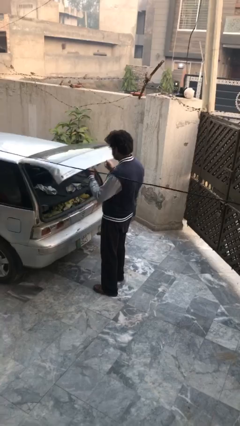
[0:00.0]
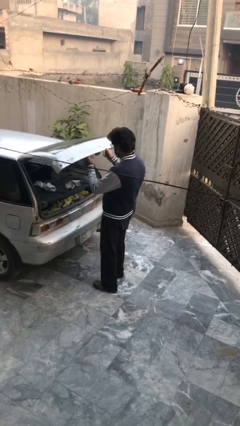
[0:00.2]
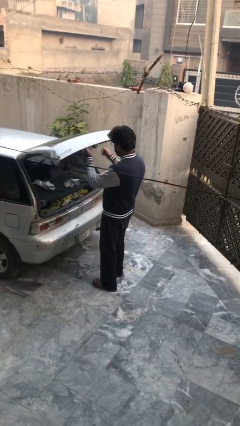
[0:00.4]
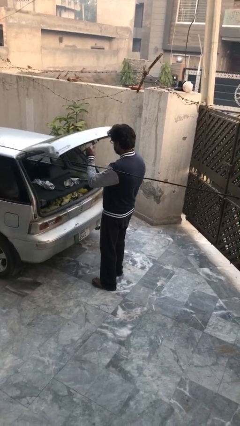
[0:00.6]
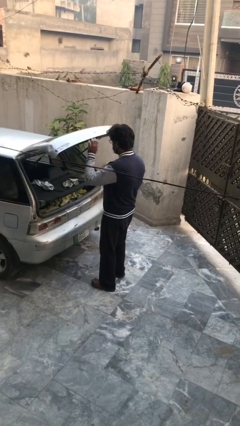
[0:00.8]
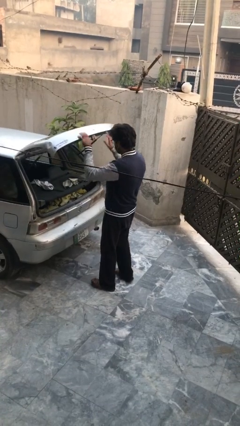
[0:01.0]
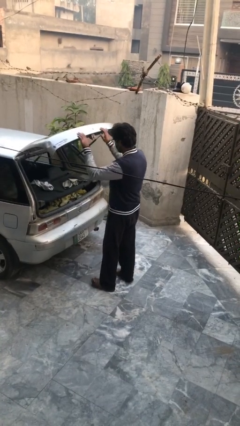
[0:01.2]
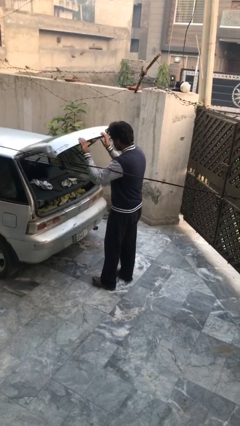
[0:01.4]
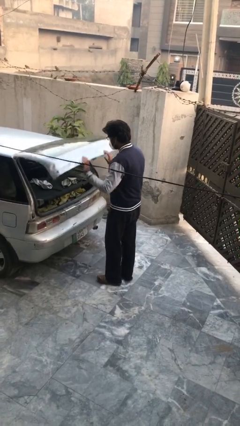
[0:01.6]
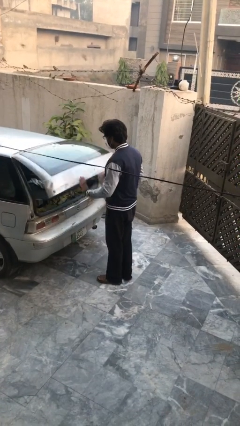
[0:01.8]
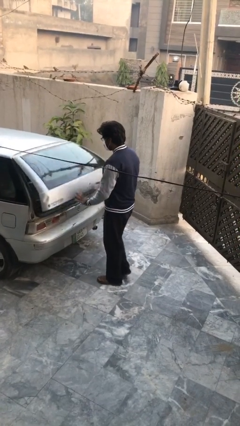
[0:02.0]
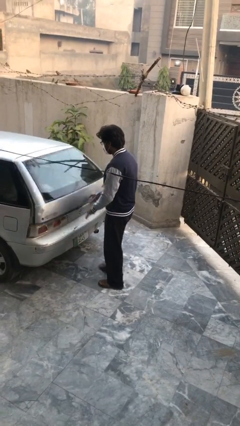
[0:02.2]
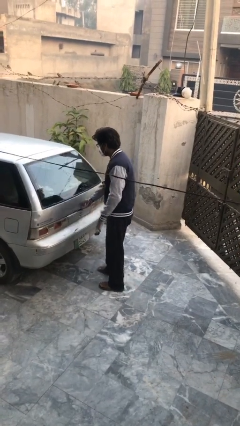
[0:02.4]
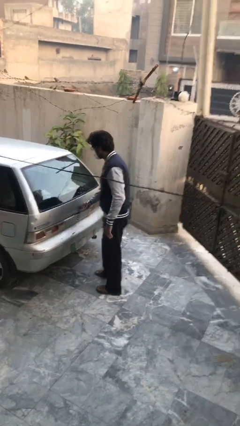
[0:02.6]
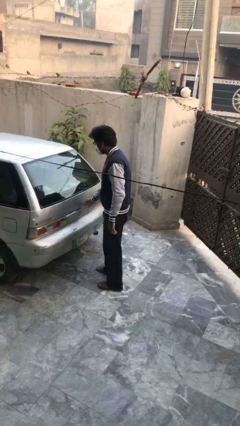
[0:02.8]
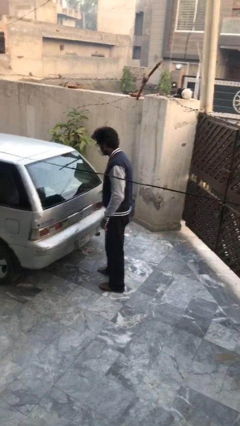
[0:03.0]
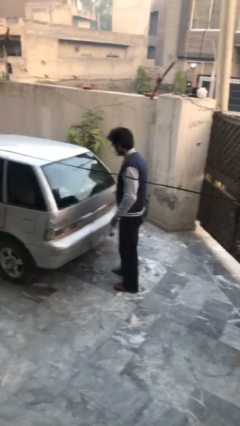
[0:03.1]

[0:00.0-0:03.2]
person closes car trunk

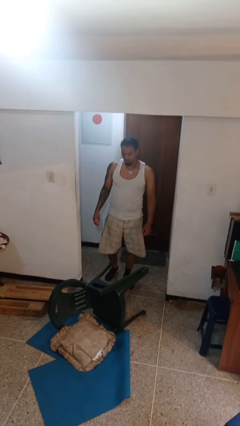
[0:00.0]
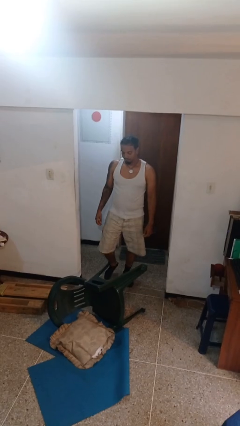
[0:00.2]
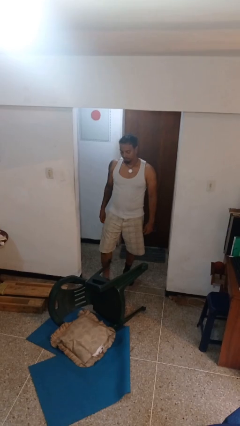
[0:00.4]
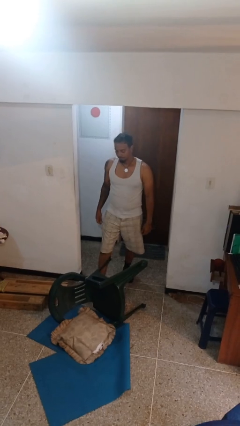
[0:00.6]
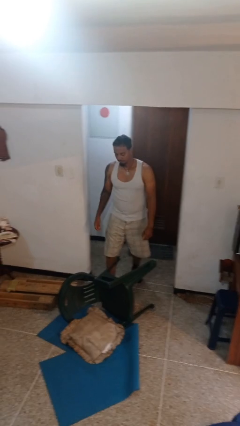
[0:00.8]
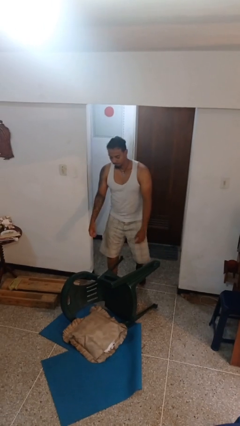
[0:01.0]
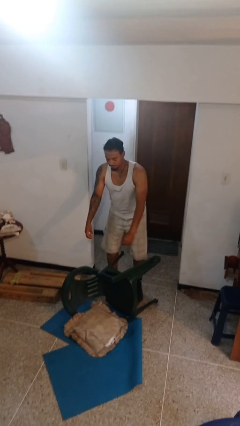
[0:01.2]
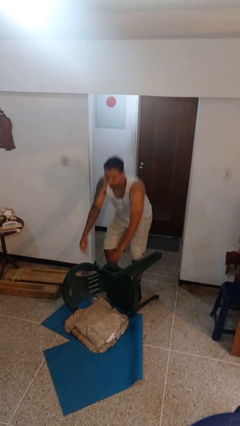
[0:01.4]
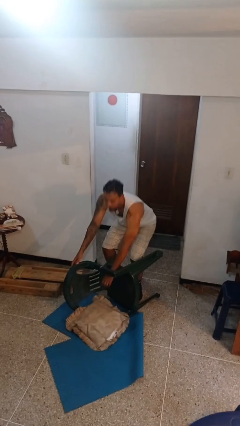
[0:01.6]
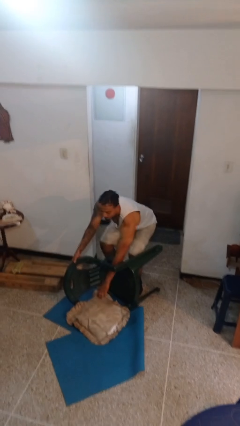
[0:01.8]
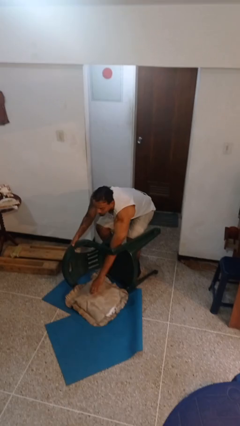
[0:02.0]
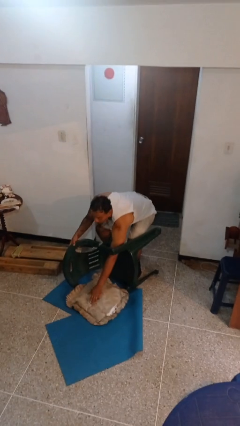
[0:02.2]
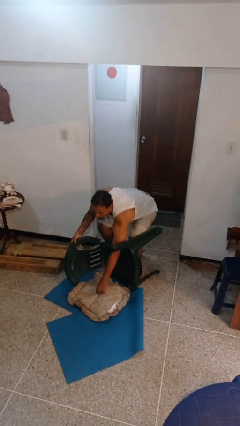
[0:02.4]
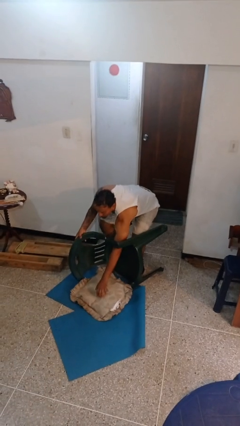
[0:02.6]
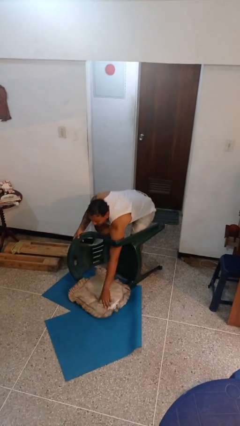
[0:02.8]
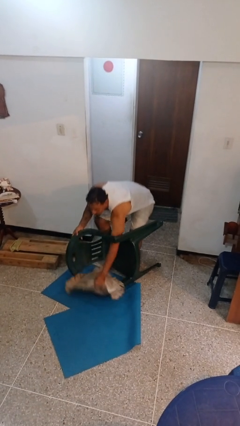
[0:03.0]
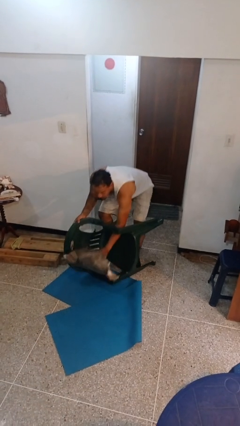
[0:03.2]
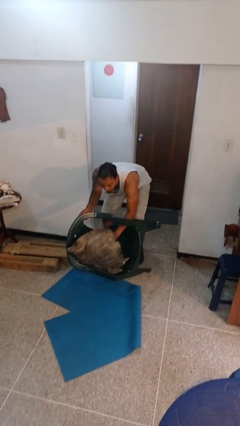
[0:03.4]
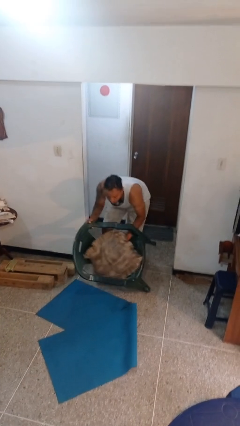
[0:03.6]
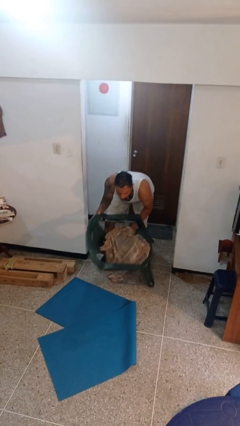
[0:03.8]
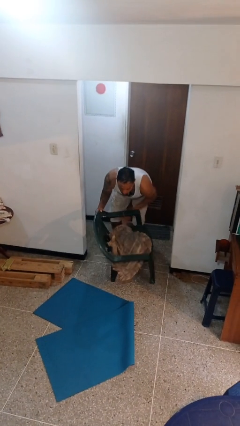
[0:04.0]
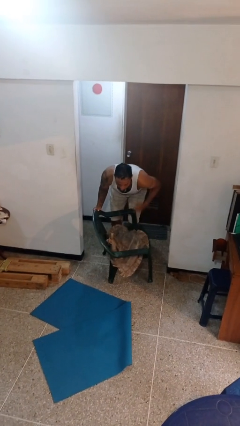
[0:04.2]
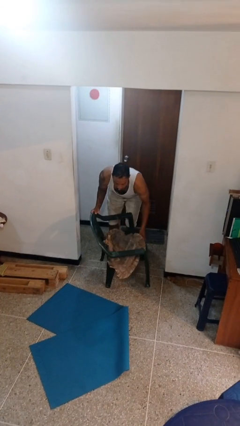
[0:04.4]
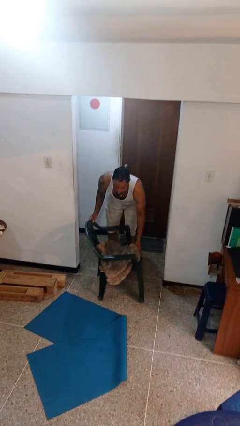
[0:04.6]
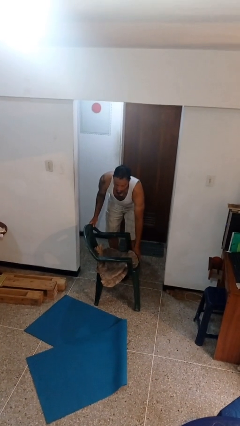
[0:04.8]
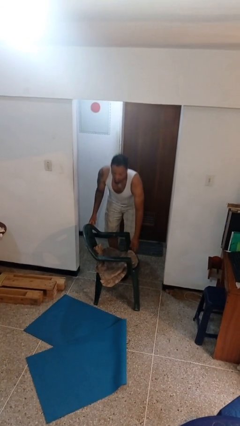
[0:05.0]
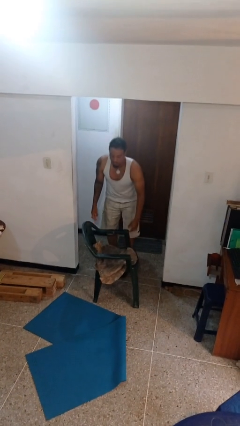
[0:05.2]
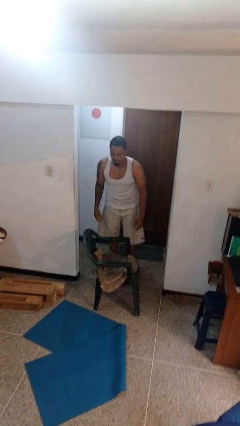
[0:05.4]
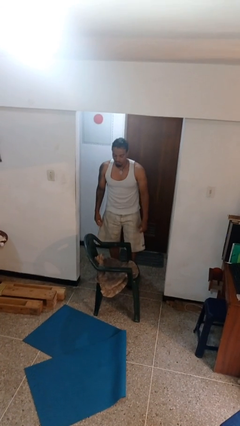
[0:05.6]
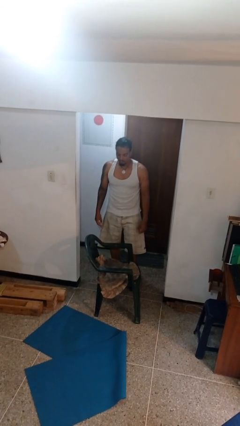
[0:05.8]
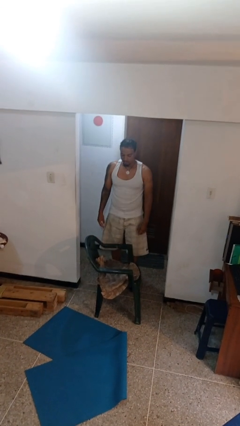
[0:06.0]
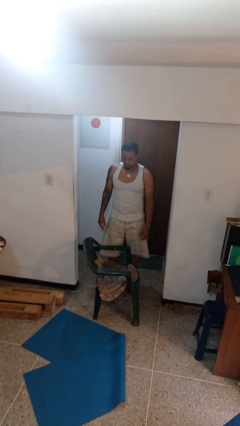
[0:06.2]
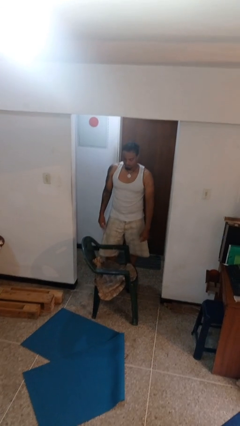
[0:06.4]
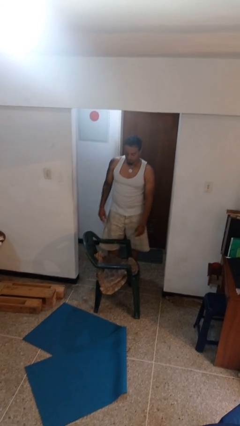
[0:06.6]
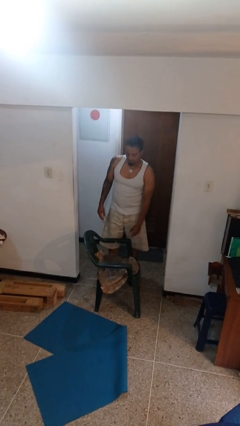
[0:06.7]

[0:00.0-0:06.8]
person sets upright furniture

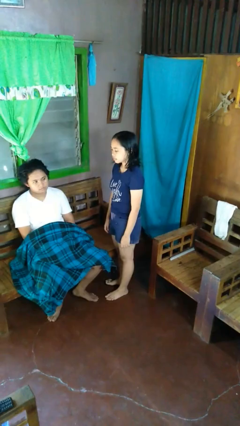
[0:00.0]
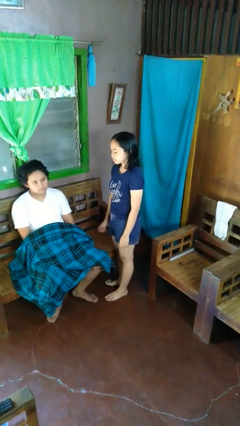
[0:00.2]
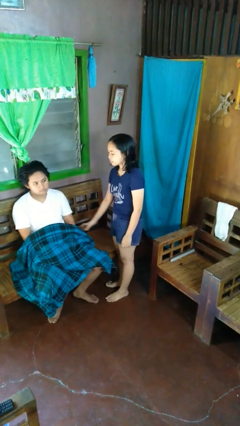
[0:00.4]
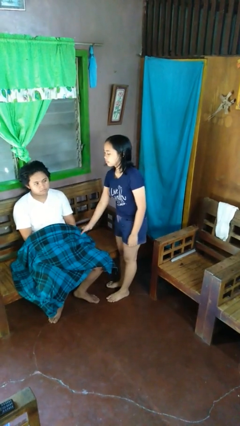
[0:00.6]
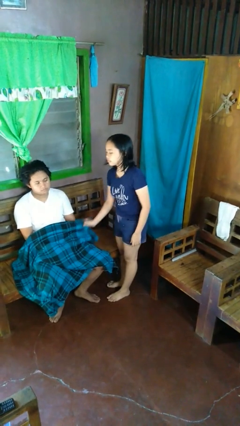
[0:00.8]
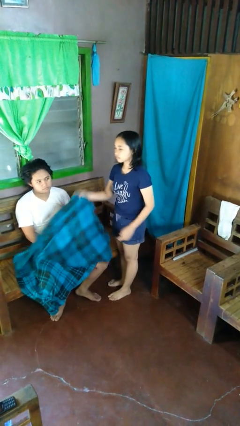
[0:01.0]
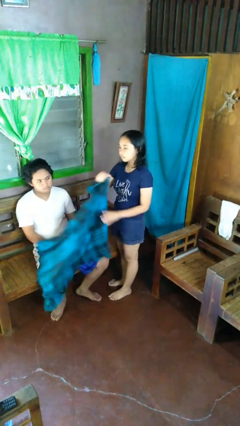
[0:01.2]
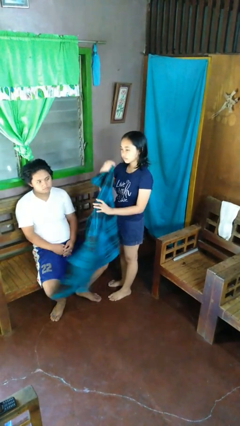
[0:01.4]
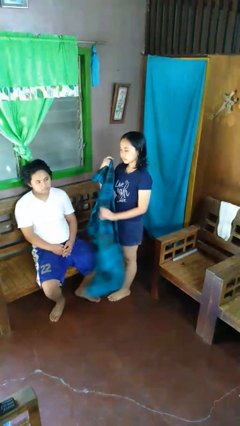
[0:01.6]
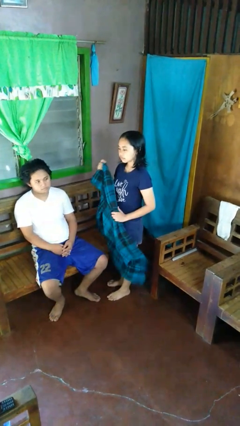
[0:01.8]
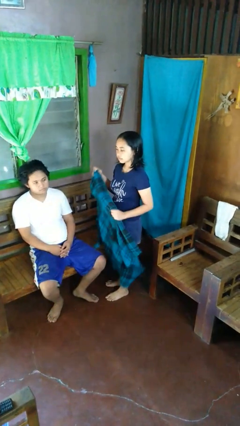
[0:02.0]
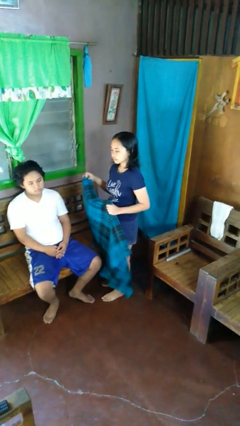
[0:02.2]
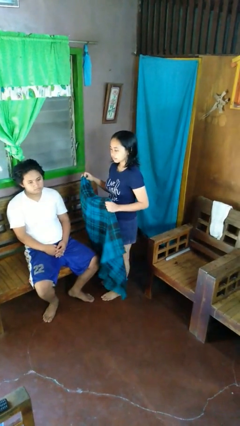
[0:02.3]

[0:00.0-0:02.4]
person uncovers friend with blanket

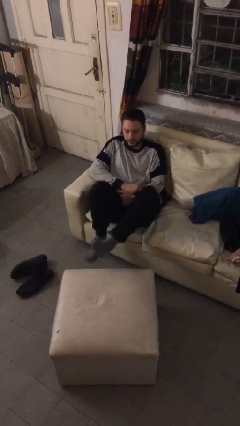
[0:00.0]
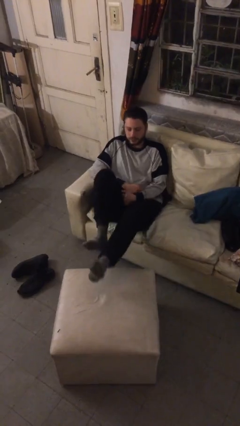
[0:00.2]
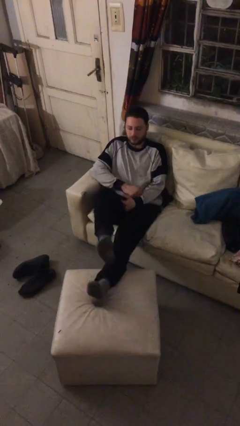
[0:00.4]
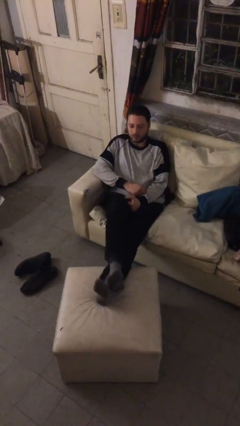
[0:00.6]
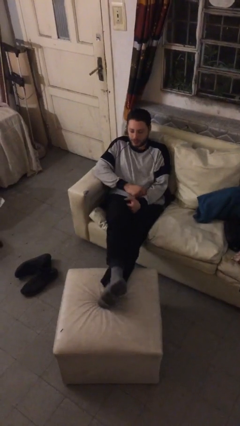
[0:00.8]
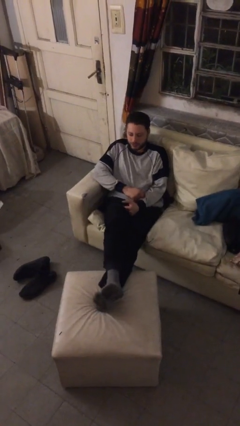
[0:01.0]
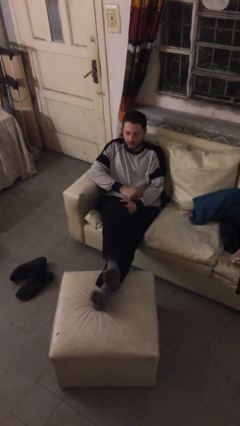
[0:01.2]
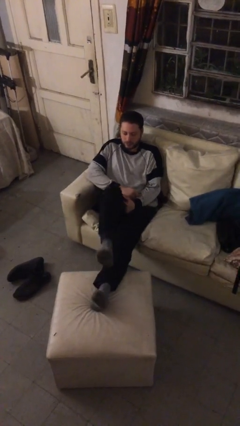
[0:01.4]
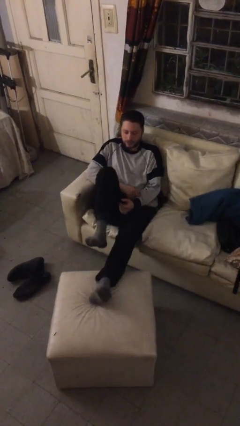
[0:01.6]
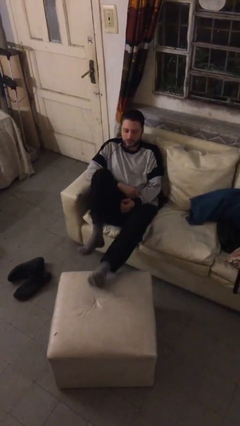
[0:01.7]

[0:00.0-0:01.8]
person puts feet up

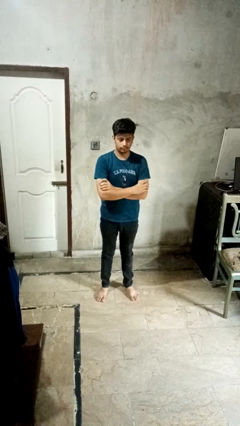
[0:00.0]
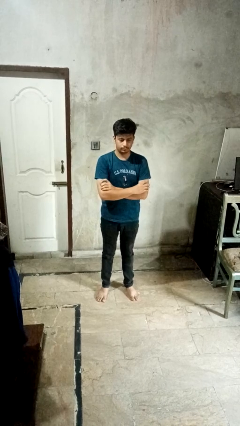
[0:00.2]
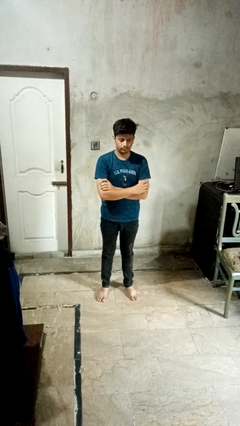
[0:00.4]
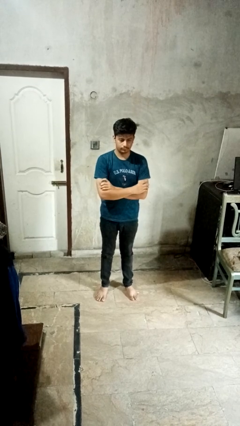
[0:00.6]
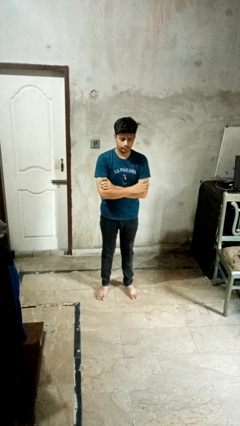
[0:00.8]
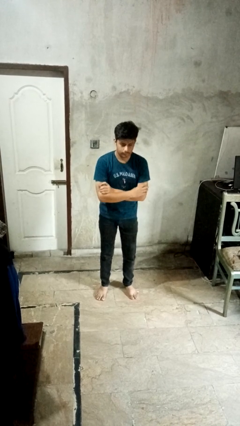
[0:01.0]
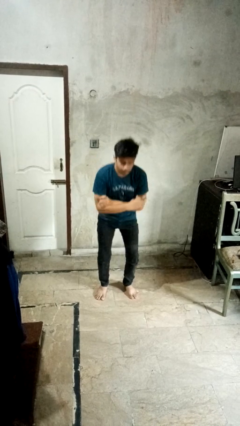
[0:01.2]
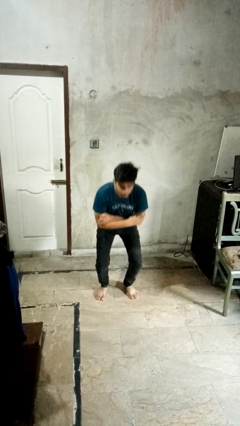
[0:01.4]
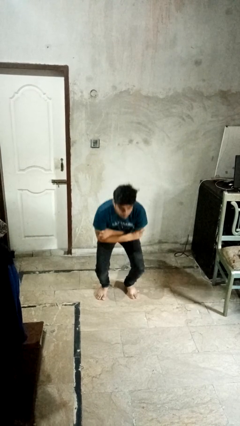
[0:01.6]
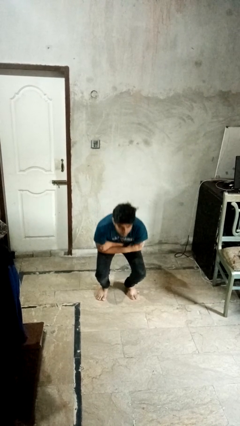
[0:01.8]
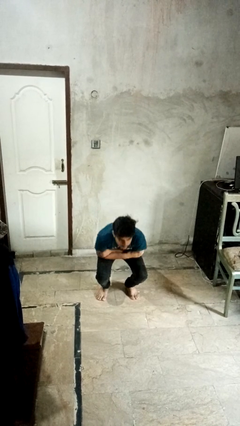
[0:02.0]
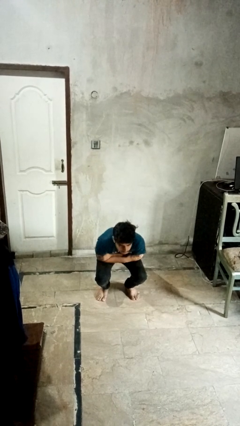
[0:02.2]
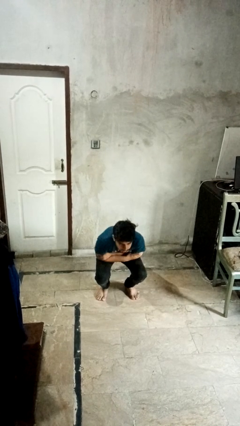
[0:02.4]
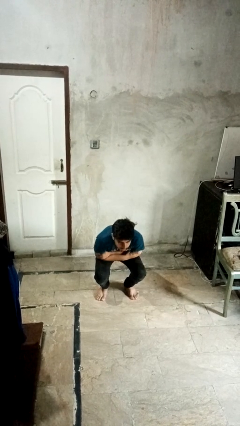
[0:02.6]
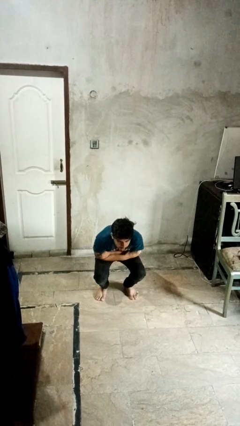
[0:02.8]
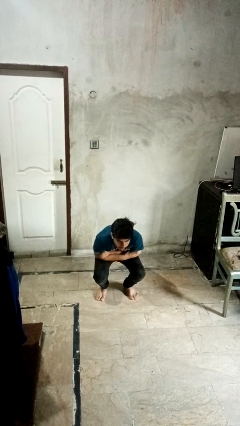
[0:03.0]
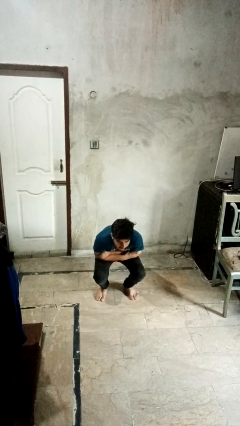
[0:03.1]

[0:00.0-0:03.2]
person squats
